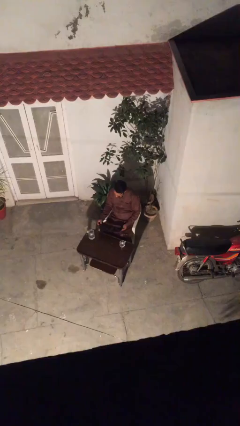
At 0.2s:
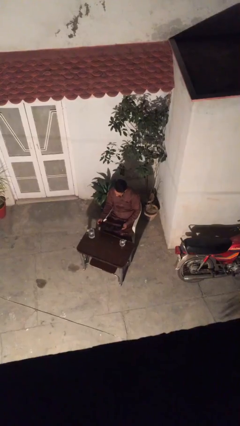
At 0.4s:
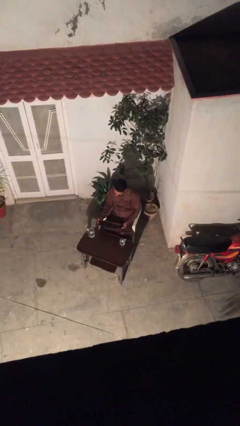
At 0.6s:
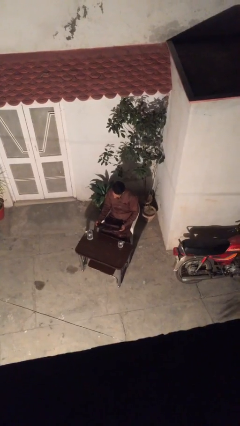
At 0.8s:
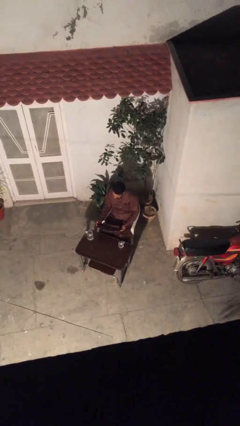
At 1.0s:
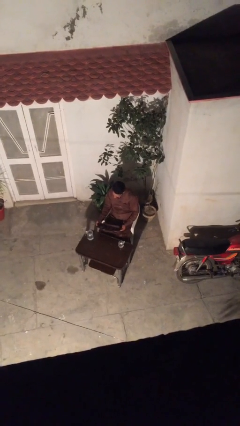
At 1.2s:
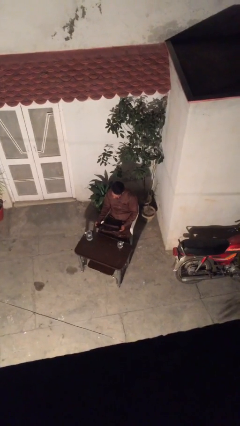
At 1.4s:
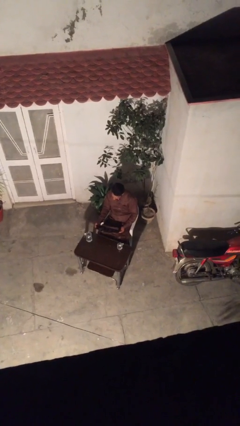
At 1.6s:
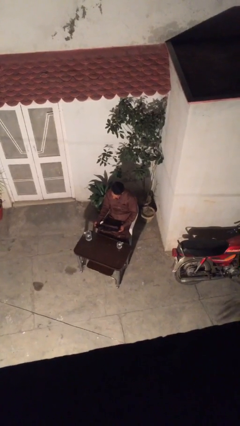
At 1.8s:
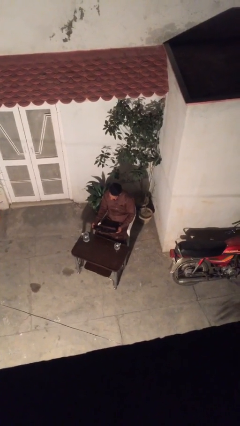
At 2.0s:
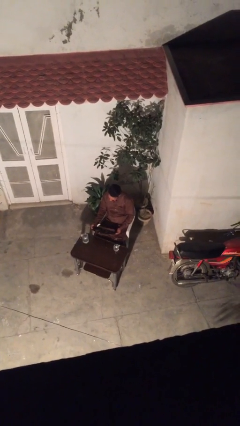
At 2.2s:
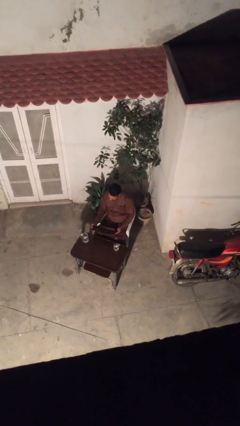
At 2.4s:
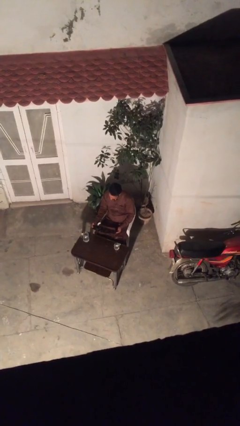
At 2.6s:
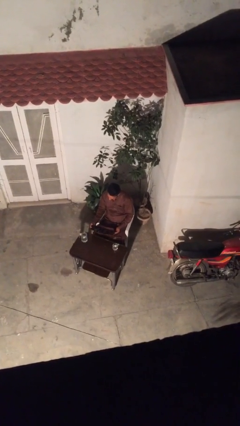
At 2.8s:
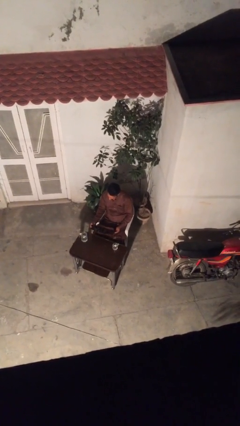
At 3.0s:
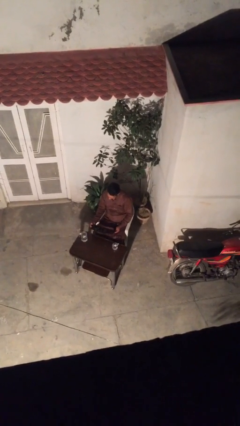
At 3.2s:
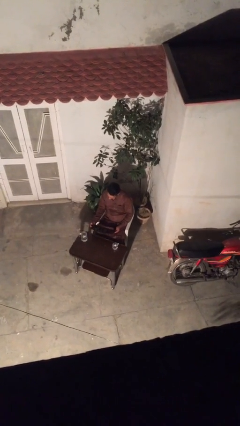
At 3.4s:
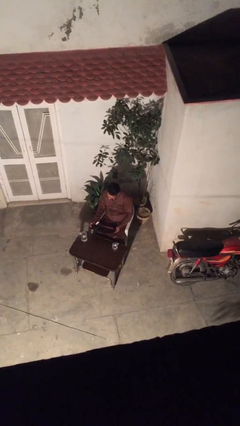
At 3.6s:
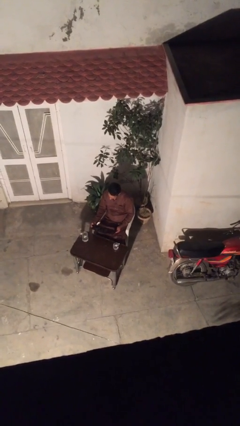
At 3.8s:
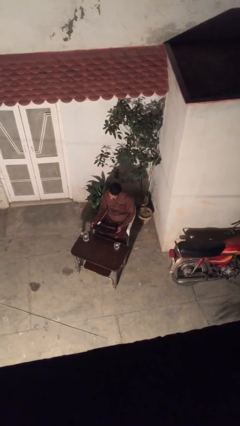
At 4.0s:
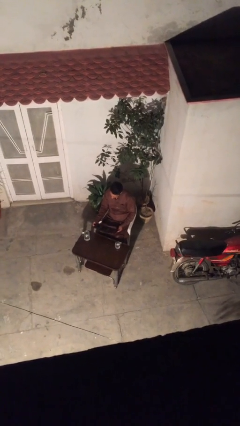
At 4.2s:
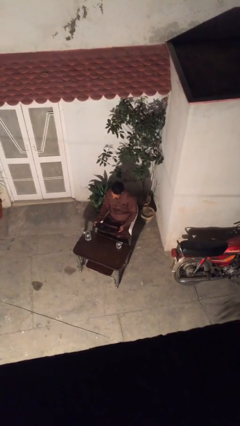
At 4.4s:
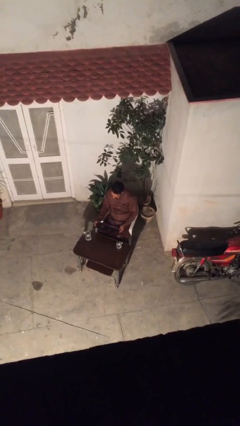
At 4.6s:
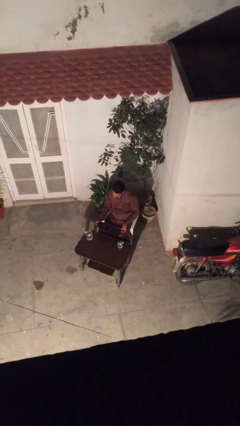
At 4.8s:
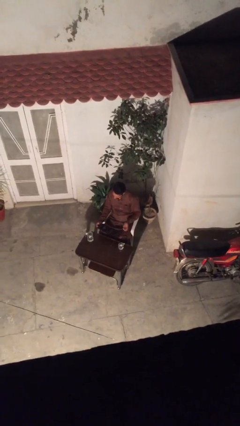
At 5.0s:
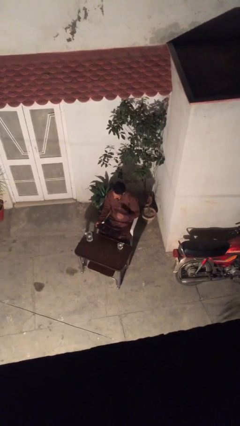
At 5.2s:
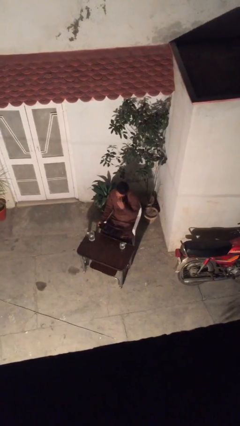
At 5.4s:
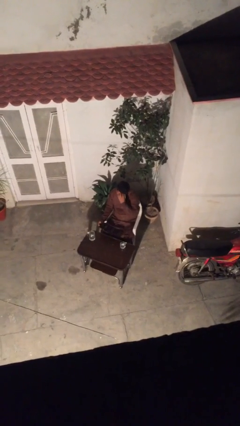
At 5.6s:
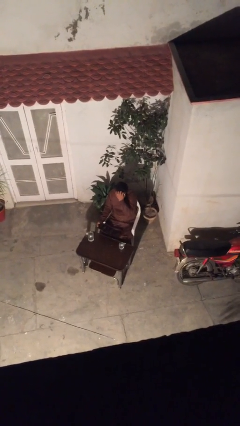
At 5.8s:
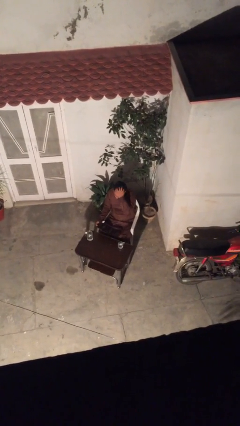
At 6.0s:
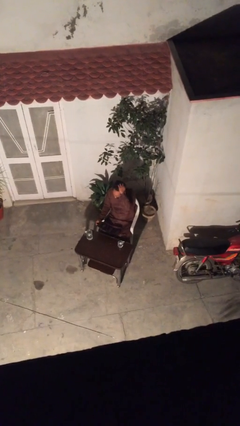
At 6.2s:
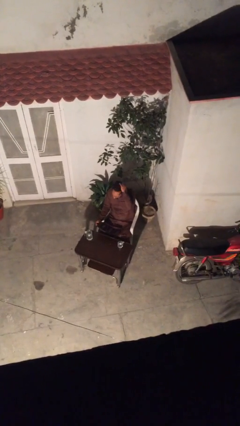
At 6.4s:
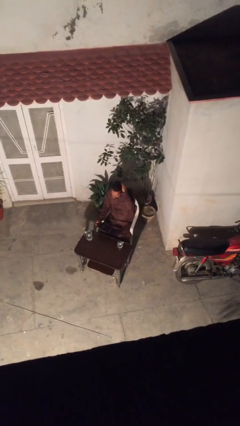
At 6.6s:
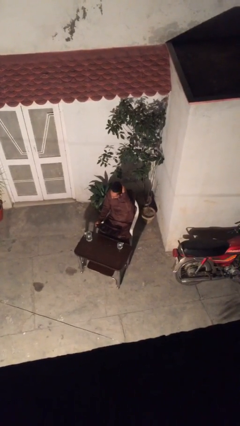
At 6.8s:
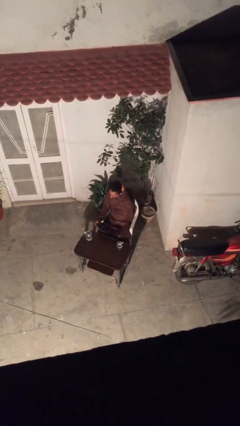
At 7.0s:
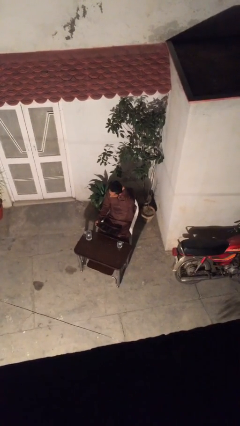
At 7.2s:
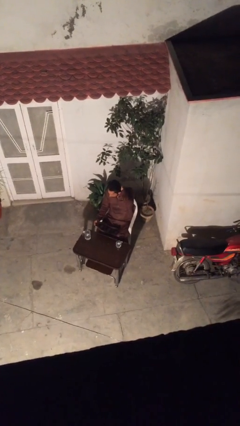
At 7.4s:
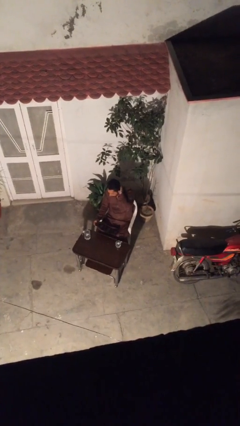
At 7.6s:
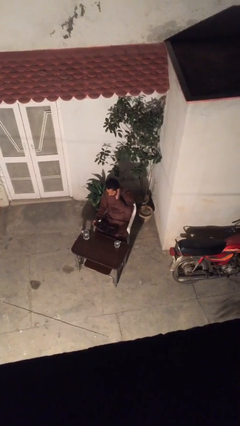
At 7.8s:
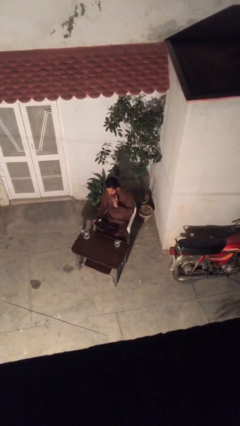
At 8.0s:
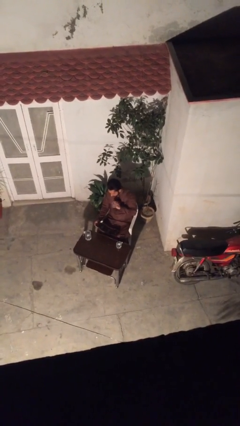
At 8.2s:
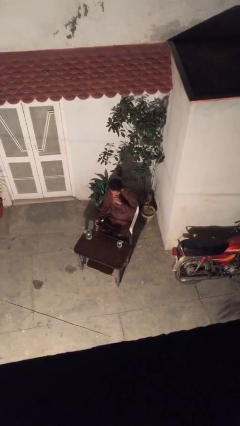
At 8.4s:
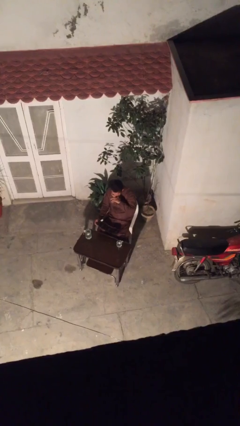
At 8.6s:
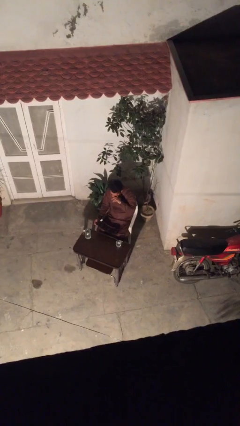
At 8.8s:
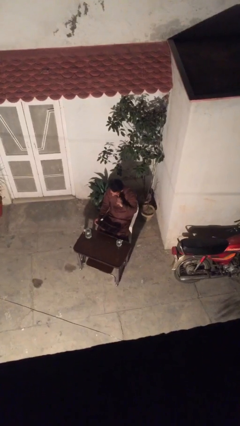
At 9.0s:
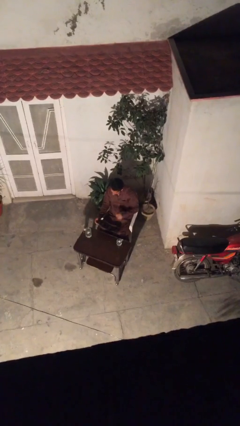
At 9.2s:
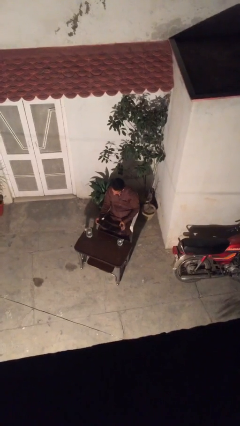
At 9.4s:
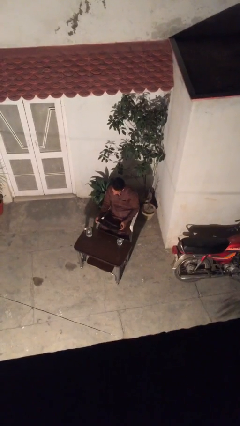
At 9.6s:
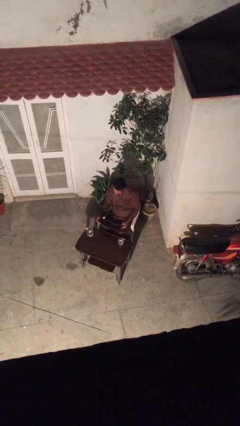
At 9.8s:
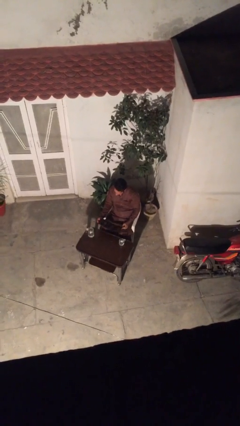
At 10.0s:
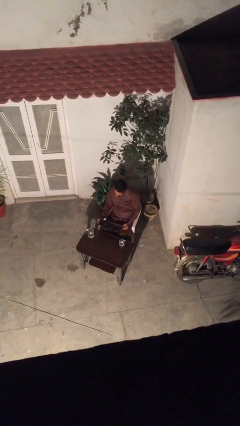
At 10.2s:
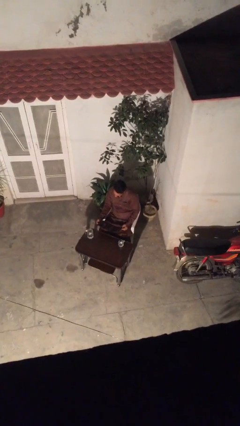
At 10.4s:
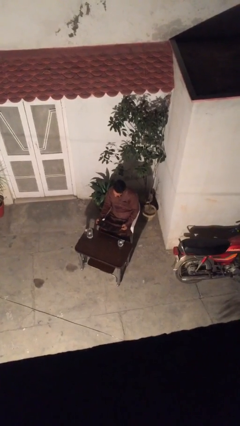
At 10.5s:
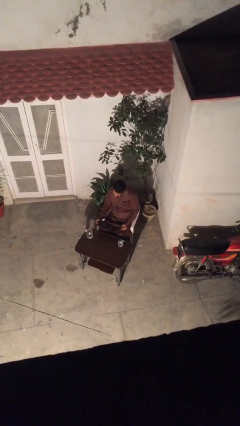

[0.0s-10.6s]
person reads document

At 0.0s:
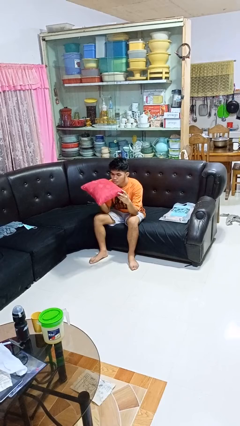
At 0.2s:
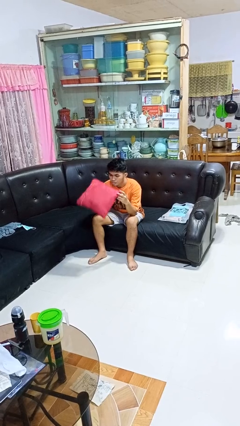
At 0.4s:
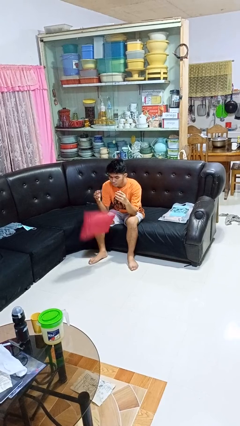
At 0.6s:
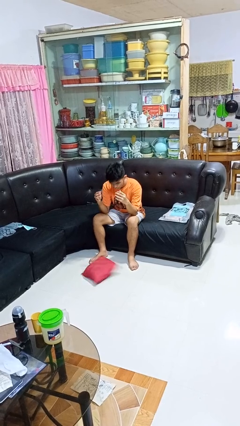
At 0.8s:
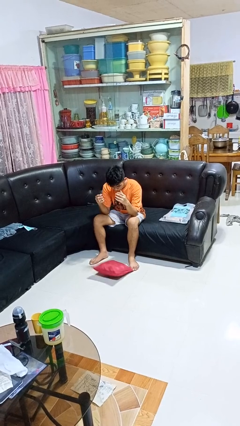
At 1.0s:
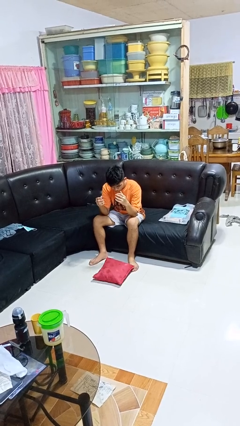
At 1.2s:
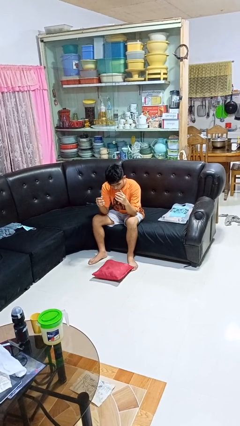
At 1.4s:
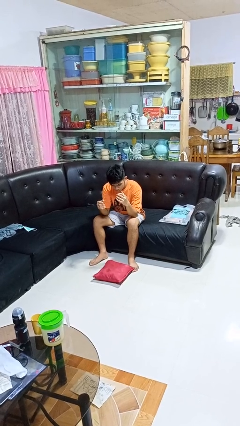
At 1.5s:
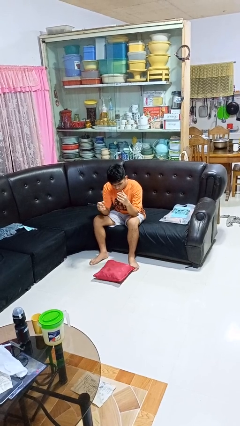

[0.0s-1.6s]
person drops object

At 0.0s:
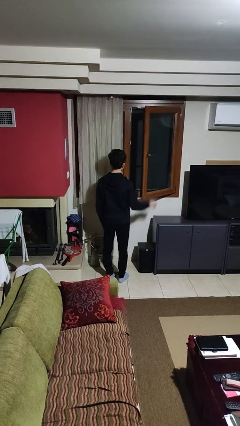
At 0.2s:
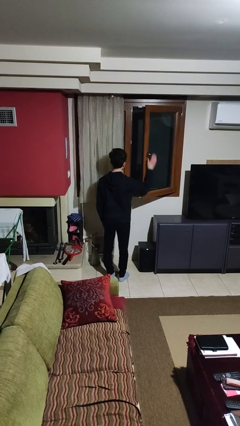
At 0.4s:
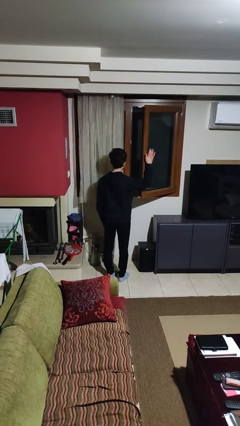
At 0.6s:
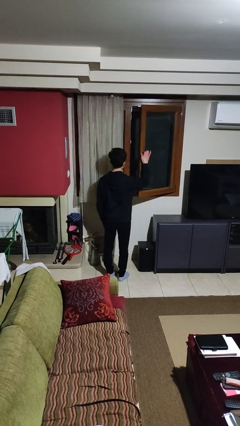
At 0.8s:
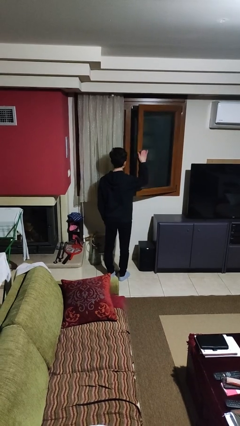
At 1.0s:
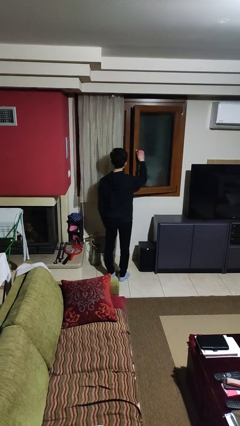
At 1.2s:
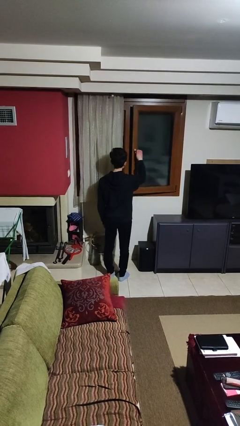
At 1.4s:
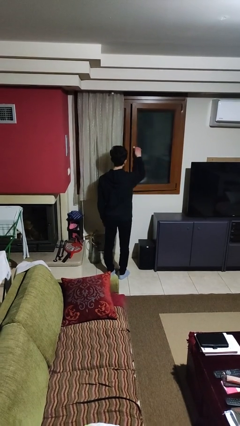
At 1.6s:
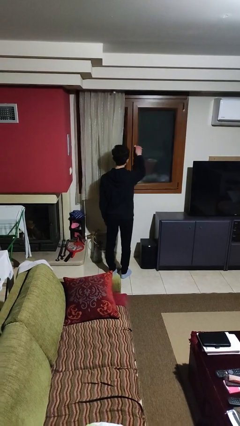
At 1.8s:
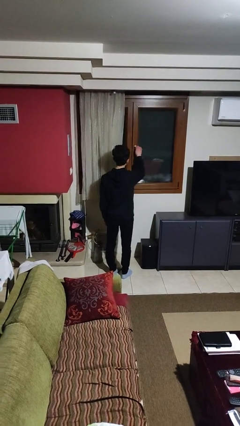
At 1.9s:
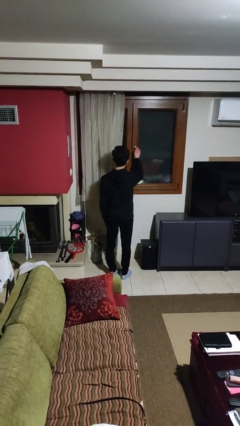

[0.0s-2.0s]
person closes home window

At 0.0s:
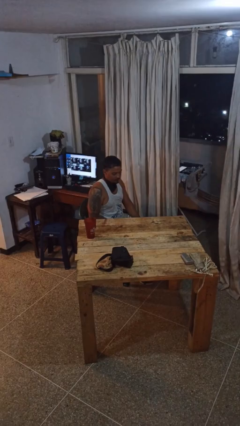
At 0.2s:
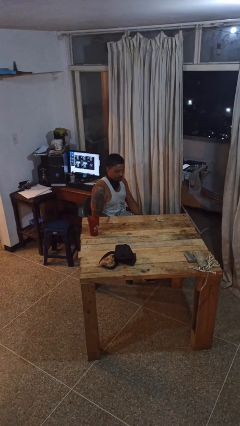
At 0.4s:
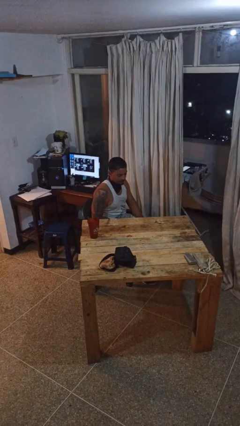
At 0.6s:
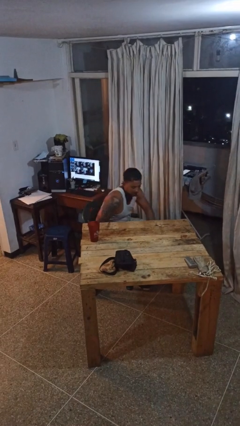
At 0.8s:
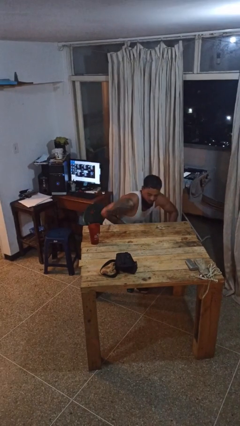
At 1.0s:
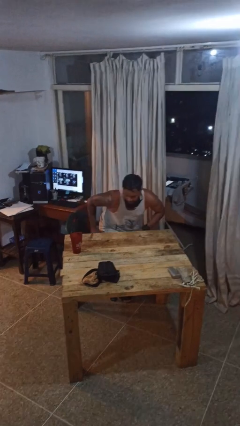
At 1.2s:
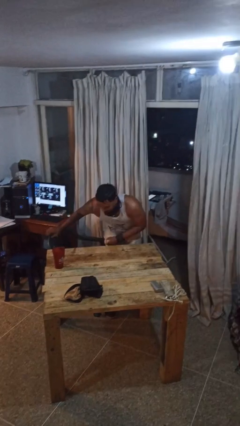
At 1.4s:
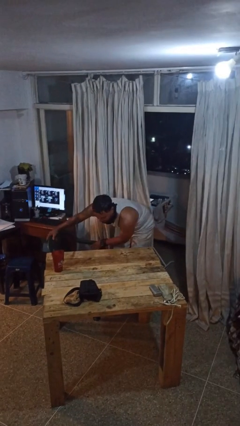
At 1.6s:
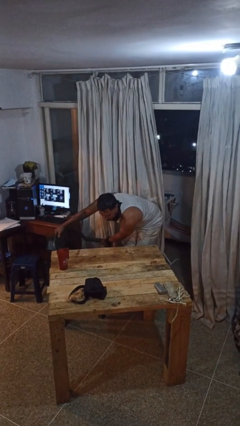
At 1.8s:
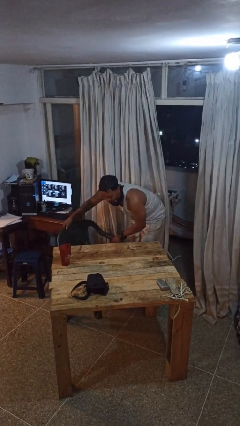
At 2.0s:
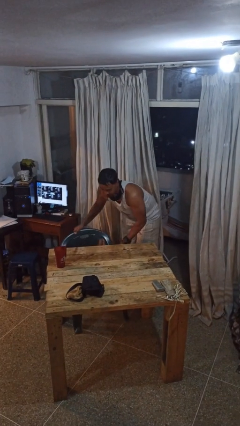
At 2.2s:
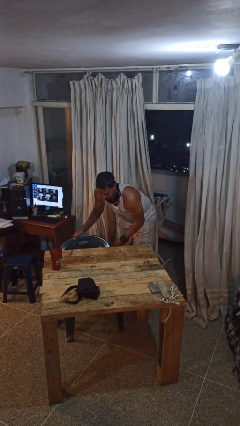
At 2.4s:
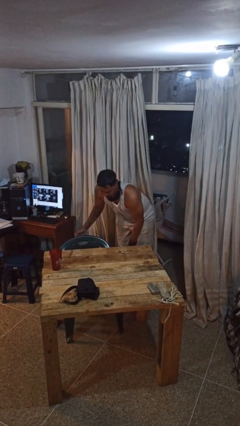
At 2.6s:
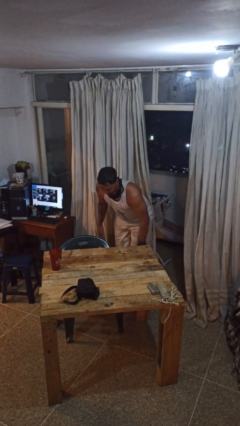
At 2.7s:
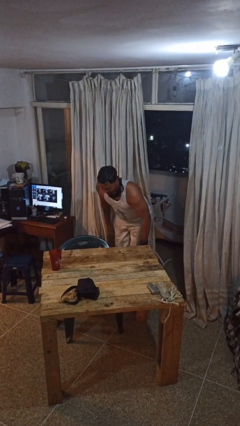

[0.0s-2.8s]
person stands up

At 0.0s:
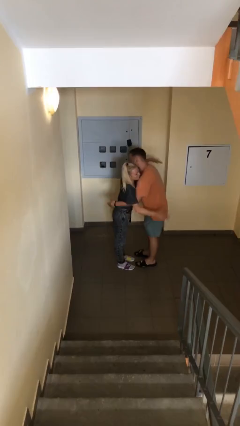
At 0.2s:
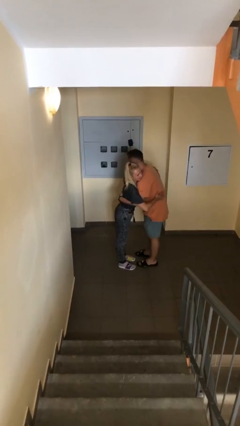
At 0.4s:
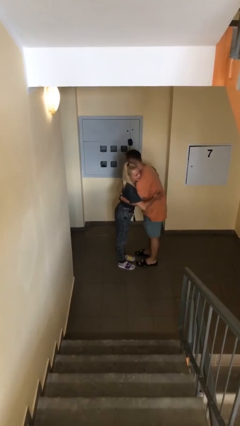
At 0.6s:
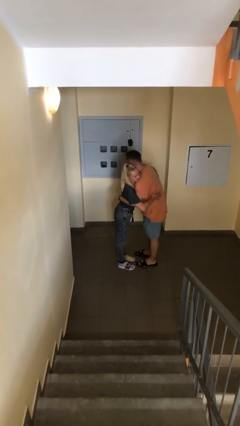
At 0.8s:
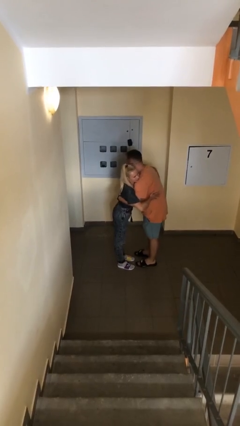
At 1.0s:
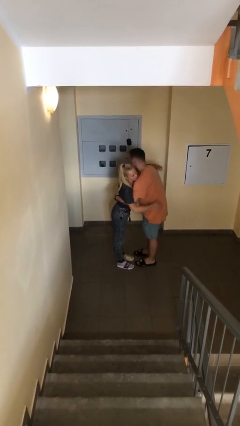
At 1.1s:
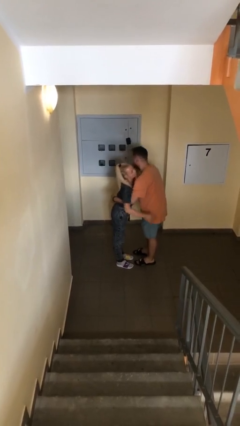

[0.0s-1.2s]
person embraces person
